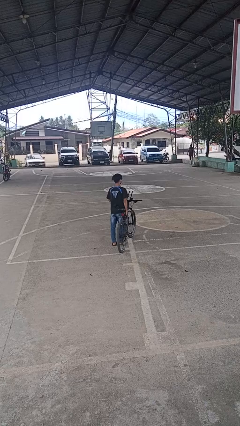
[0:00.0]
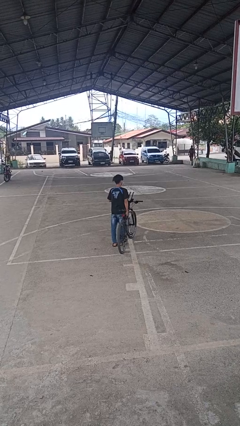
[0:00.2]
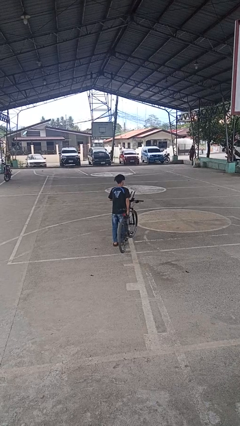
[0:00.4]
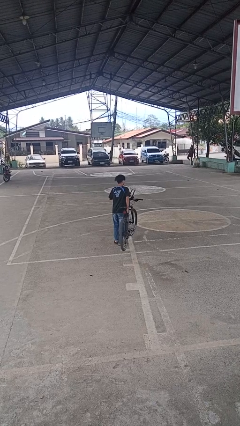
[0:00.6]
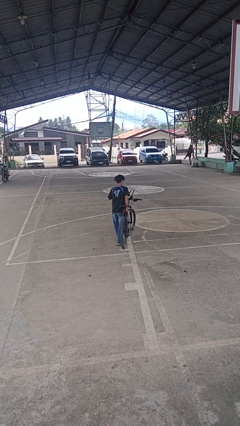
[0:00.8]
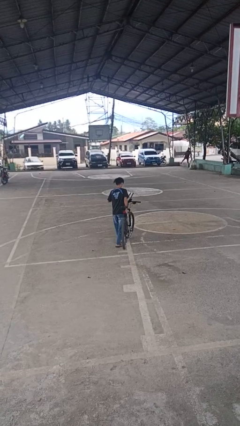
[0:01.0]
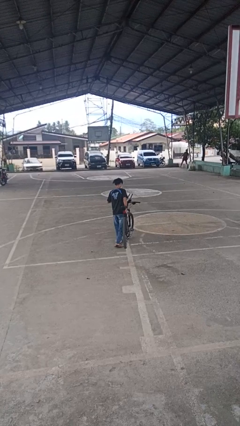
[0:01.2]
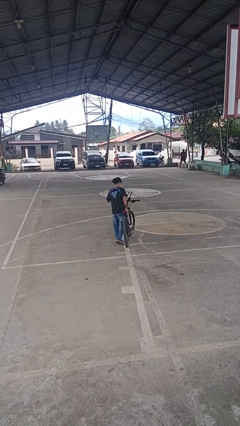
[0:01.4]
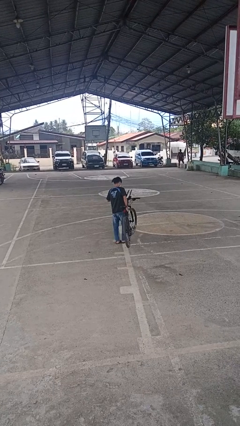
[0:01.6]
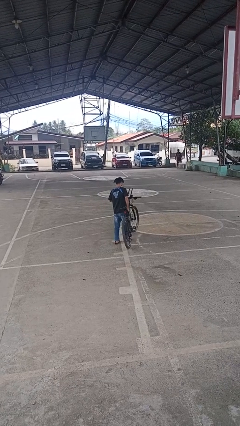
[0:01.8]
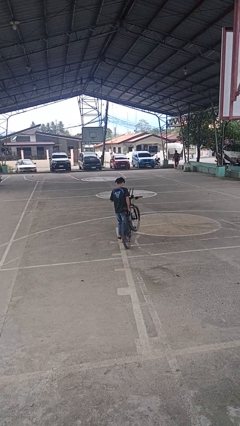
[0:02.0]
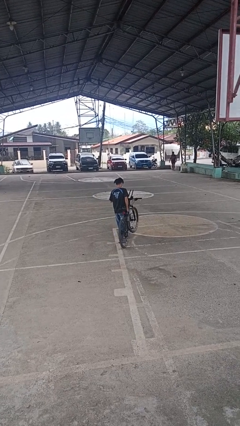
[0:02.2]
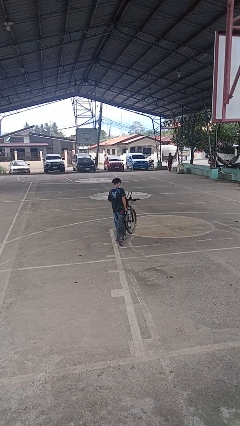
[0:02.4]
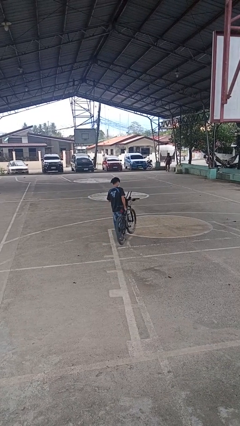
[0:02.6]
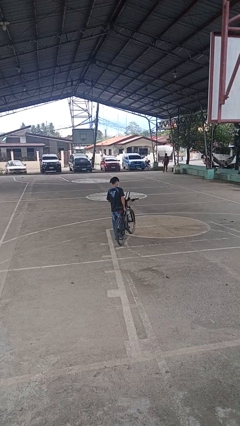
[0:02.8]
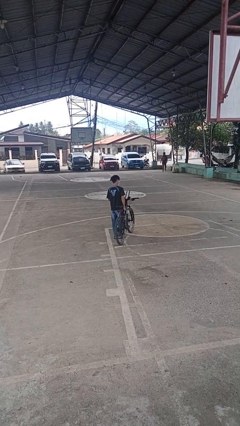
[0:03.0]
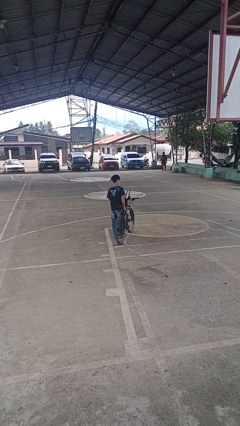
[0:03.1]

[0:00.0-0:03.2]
person carries bicycle

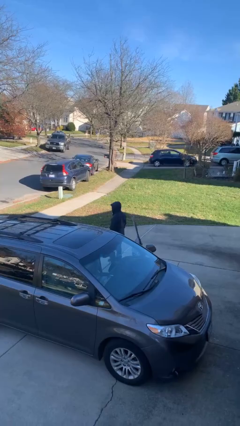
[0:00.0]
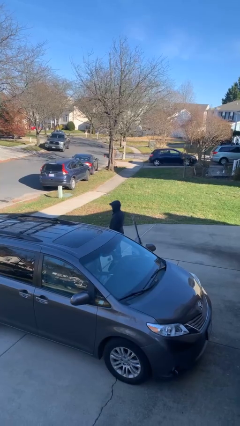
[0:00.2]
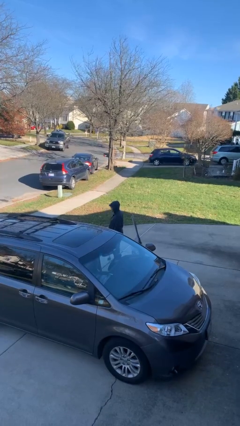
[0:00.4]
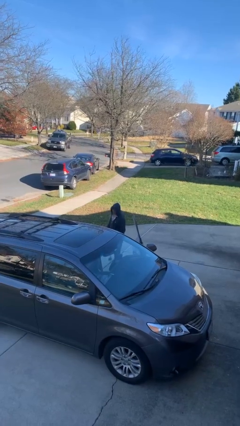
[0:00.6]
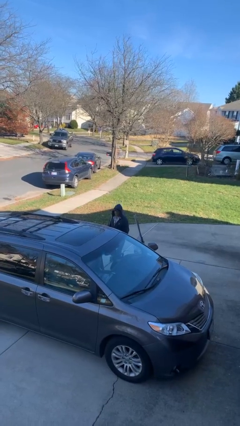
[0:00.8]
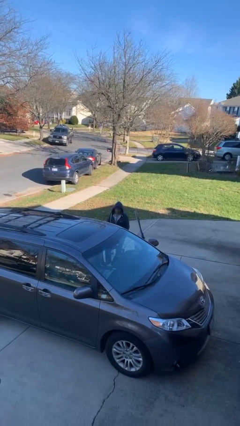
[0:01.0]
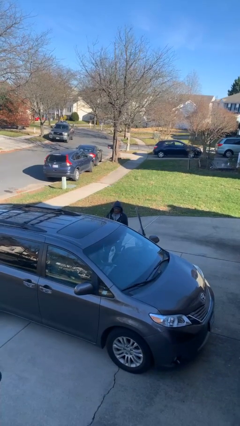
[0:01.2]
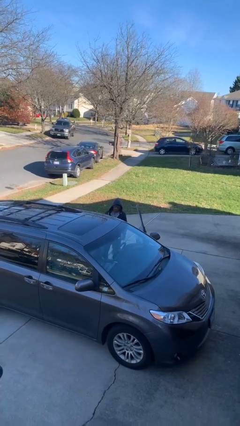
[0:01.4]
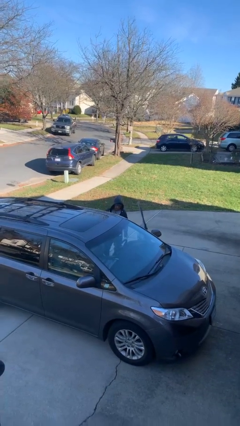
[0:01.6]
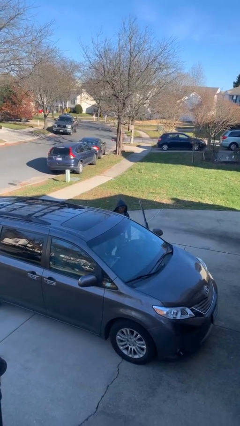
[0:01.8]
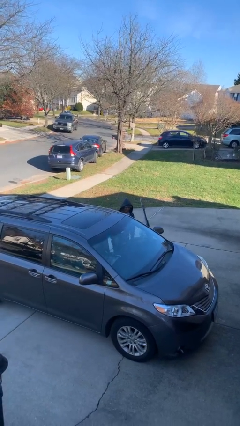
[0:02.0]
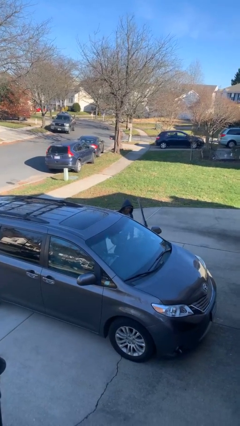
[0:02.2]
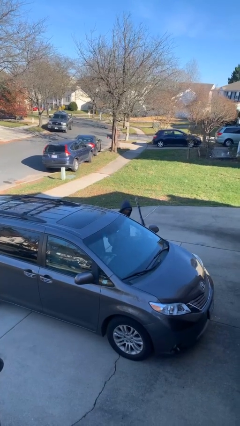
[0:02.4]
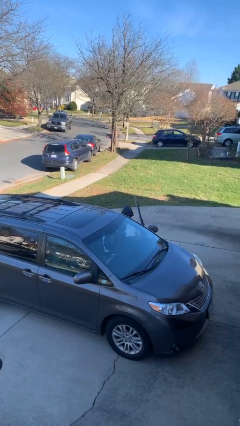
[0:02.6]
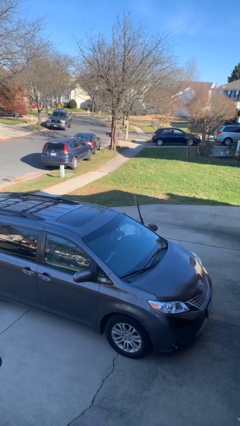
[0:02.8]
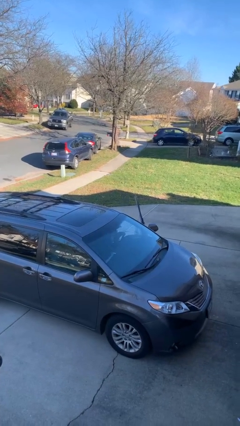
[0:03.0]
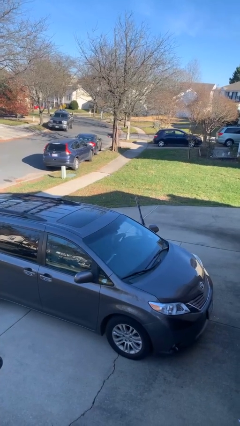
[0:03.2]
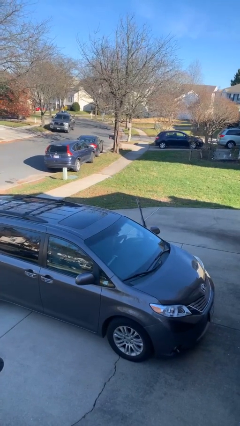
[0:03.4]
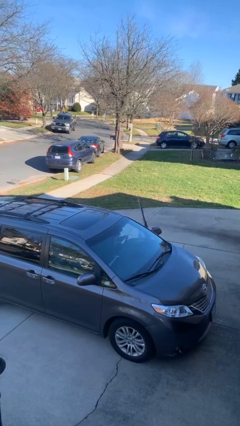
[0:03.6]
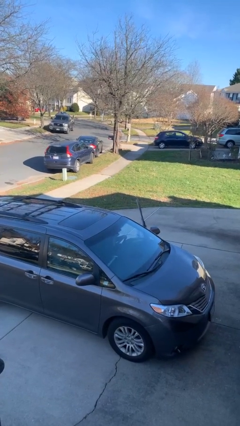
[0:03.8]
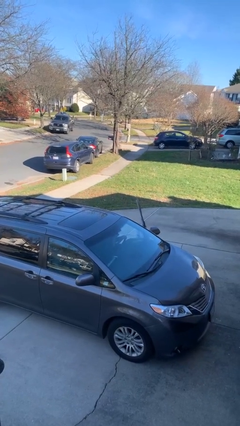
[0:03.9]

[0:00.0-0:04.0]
person enters car

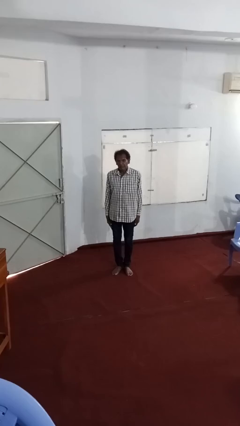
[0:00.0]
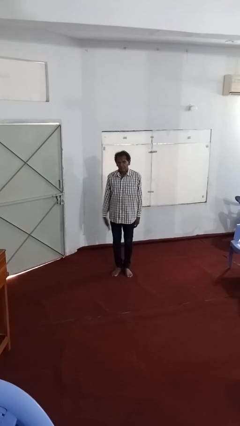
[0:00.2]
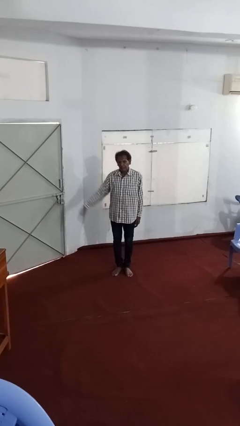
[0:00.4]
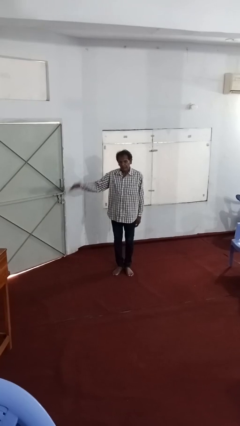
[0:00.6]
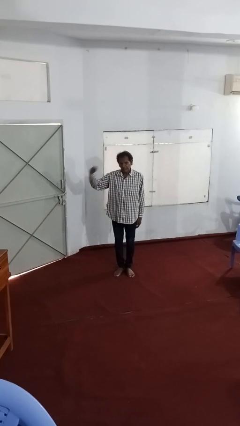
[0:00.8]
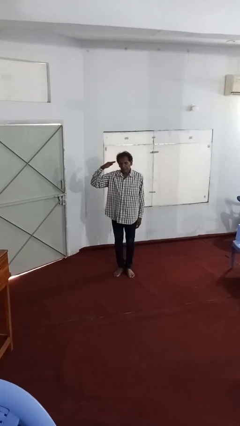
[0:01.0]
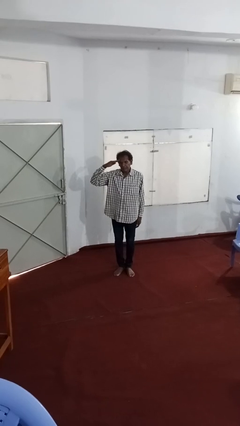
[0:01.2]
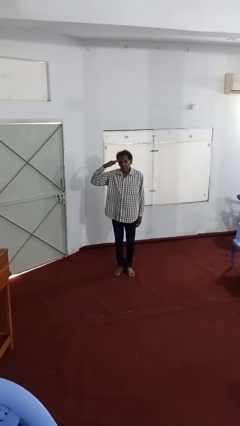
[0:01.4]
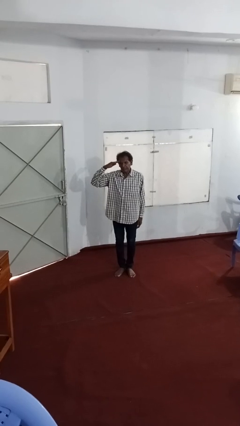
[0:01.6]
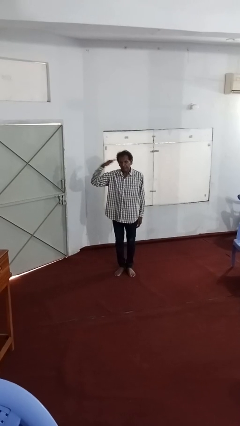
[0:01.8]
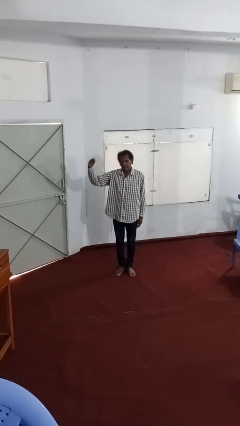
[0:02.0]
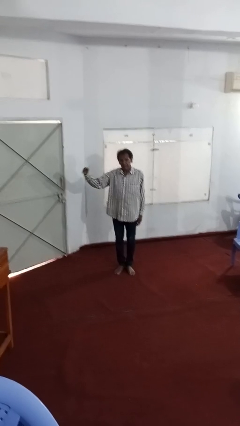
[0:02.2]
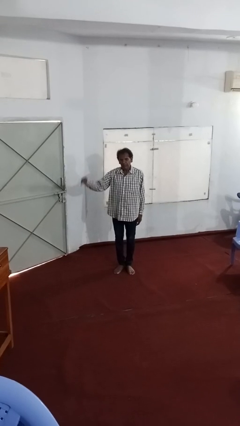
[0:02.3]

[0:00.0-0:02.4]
person salutes

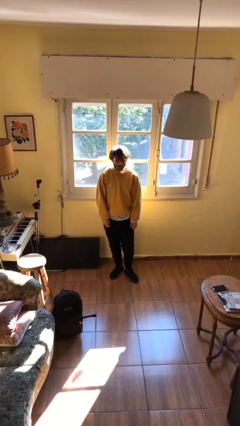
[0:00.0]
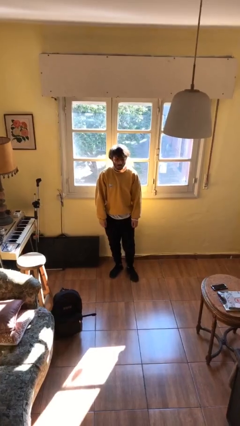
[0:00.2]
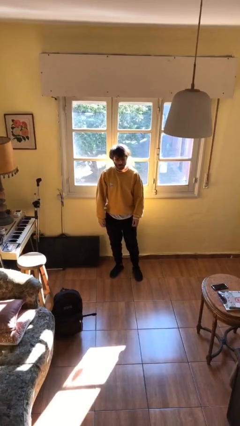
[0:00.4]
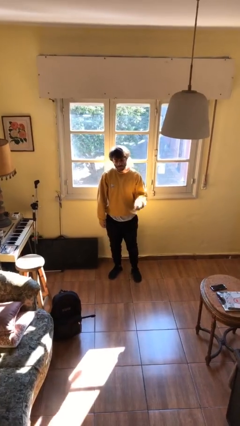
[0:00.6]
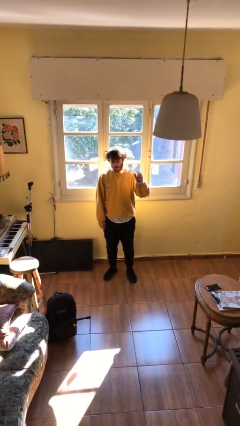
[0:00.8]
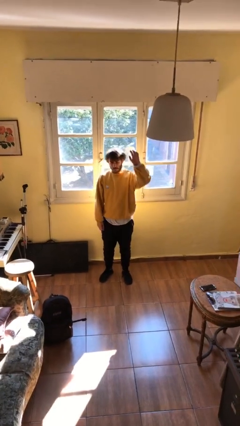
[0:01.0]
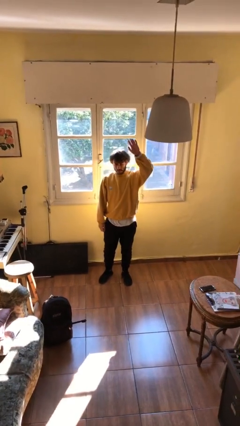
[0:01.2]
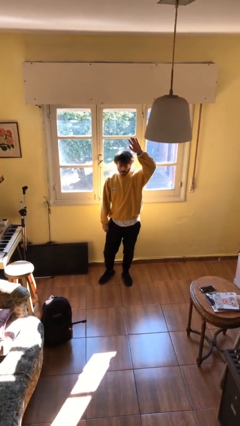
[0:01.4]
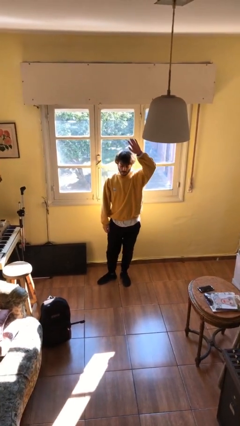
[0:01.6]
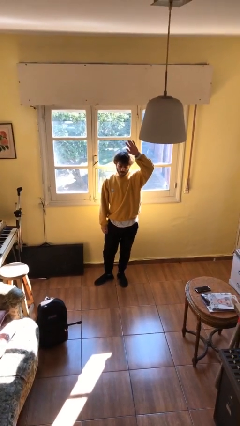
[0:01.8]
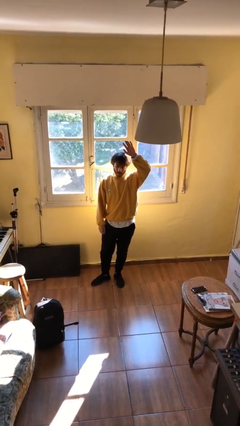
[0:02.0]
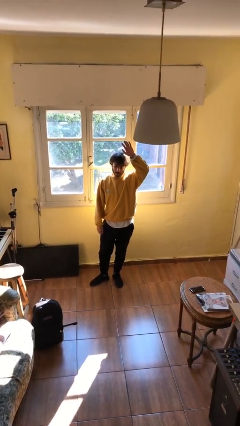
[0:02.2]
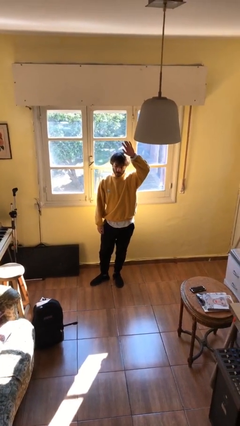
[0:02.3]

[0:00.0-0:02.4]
person gestures raise hand

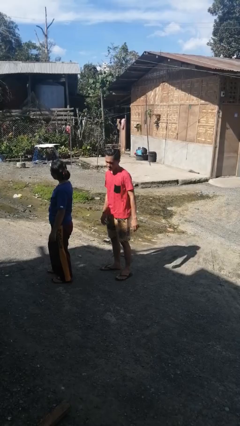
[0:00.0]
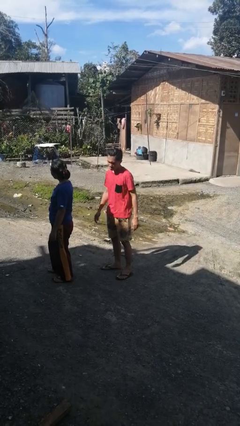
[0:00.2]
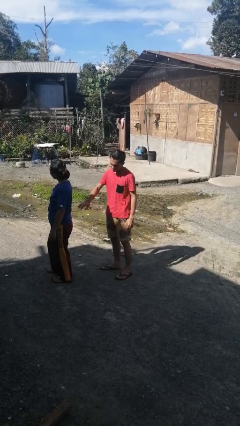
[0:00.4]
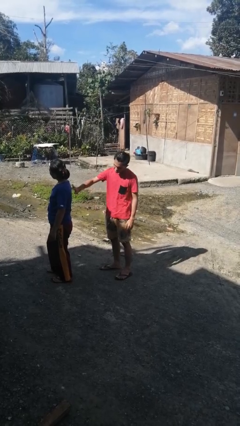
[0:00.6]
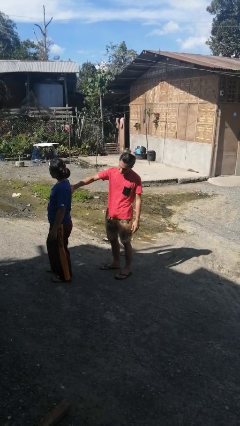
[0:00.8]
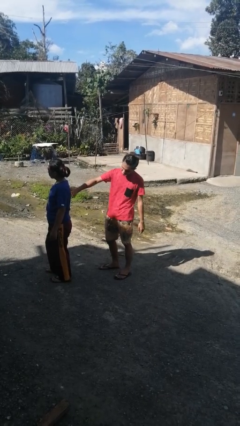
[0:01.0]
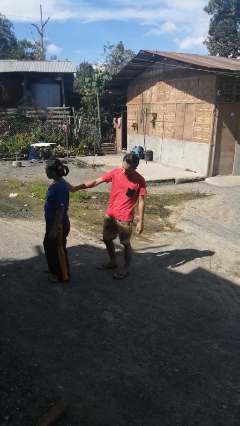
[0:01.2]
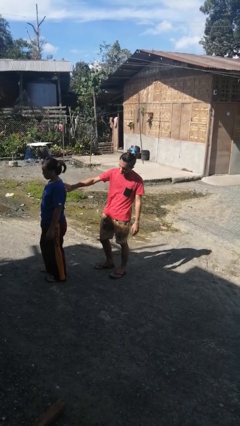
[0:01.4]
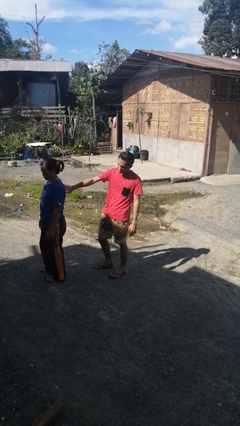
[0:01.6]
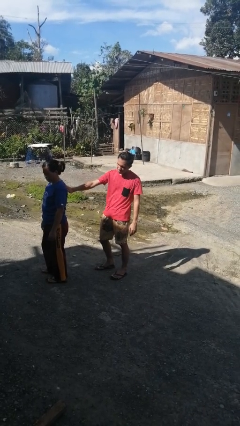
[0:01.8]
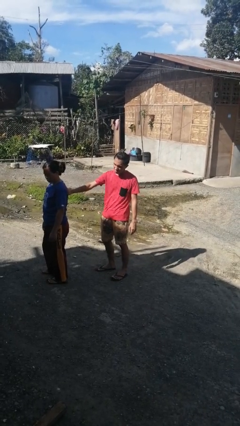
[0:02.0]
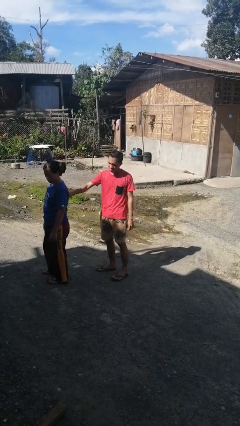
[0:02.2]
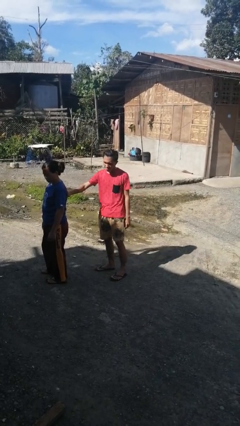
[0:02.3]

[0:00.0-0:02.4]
person touches back of person

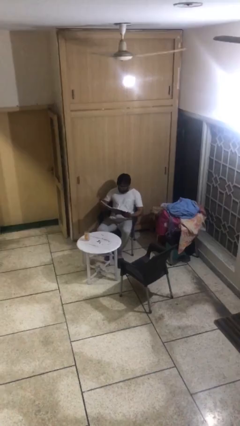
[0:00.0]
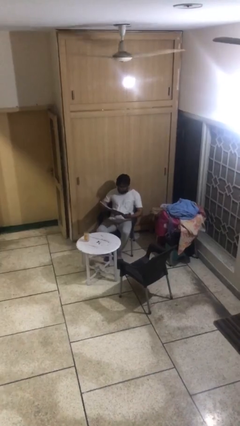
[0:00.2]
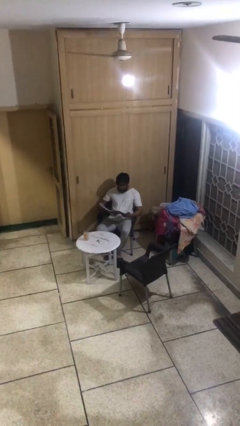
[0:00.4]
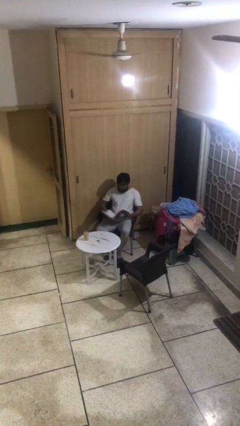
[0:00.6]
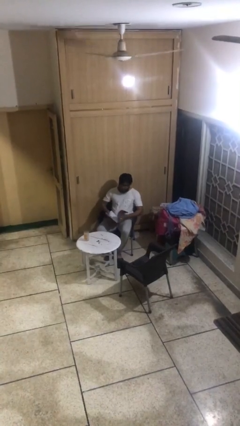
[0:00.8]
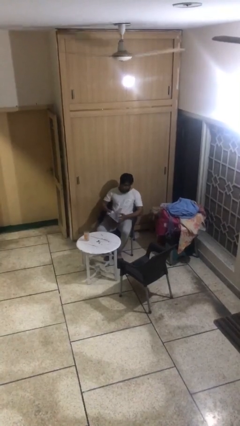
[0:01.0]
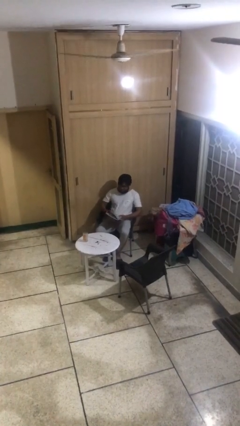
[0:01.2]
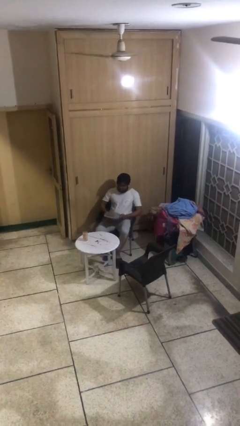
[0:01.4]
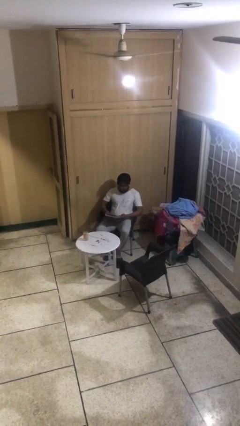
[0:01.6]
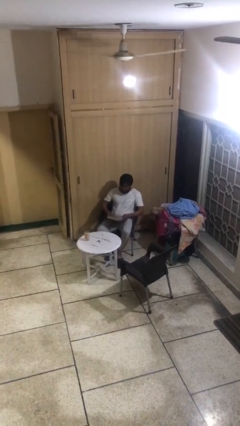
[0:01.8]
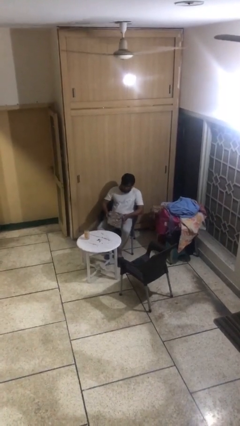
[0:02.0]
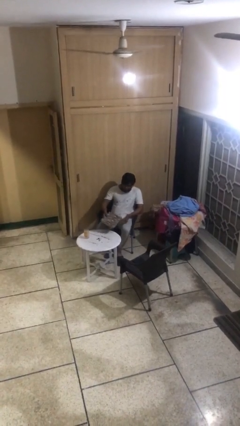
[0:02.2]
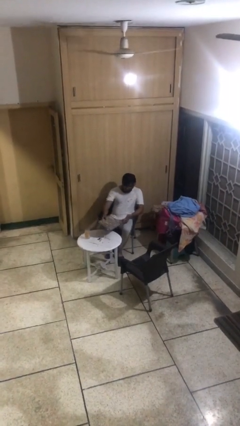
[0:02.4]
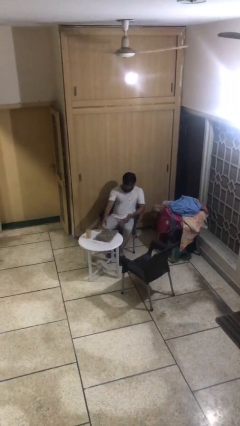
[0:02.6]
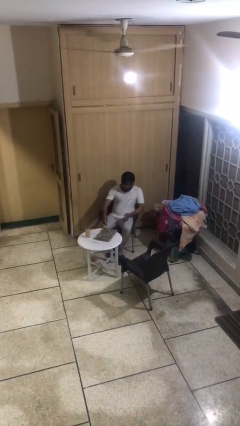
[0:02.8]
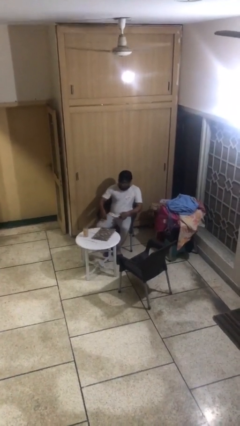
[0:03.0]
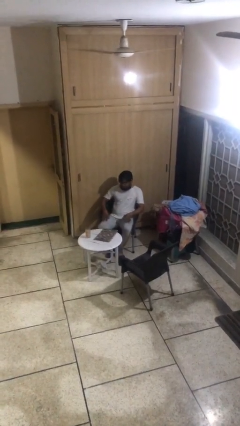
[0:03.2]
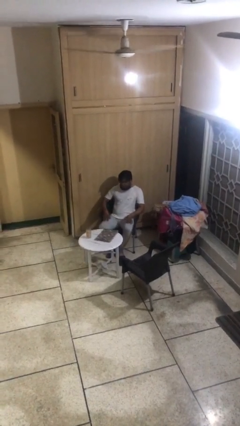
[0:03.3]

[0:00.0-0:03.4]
person puts down object on table
